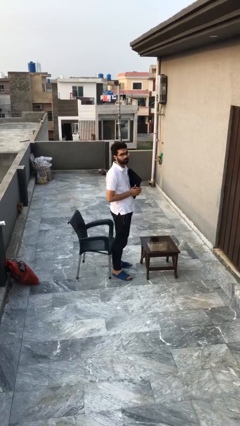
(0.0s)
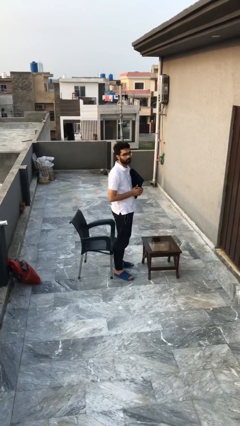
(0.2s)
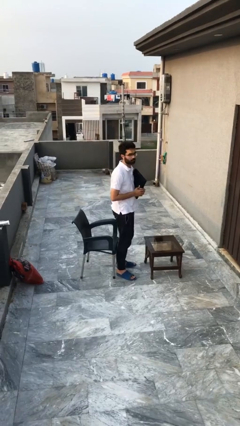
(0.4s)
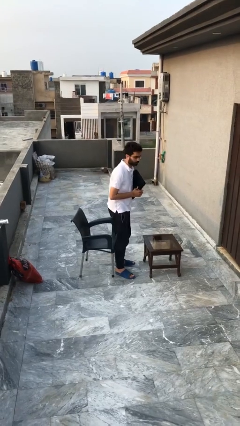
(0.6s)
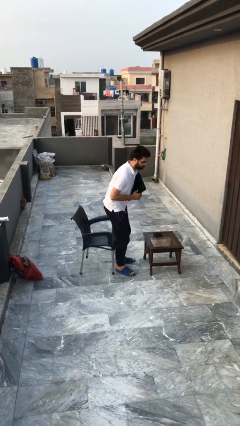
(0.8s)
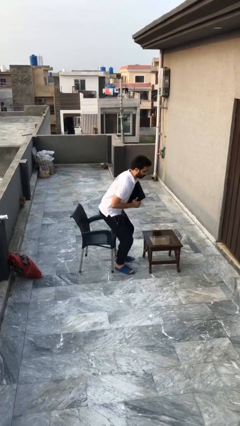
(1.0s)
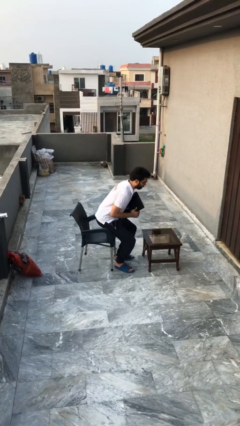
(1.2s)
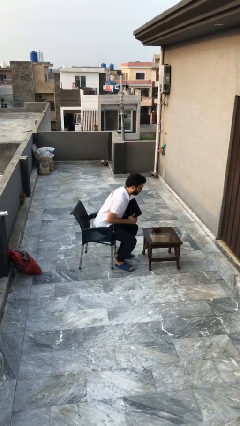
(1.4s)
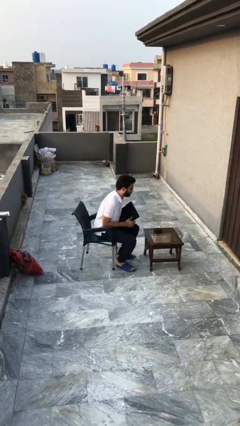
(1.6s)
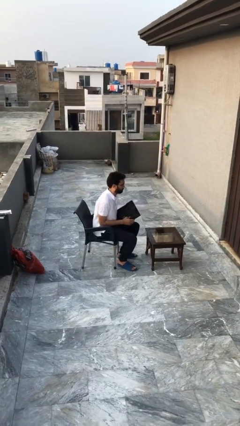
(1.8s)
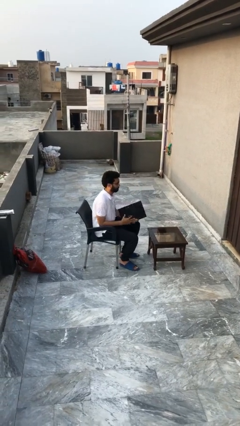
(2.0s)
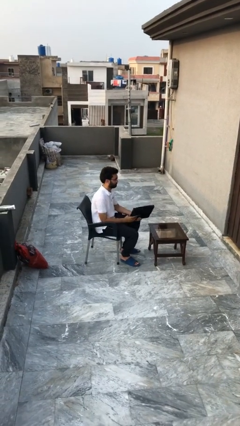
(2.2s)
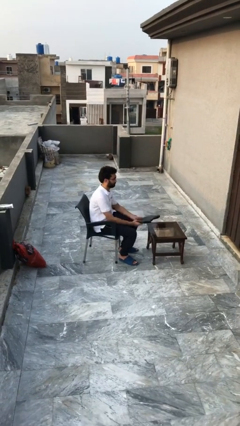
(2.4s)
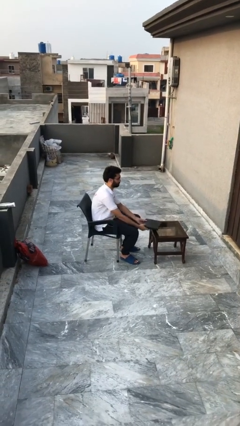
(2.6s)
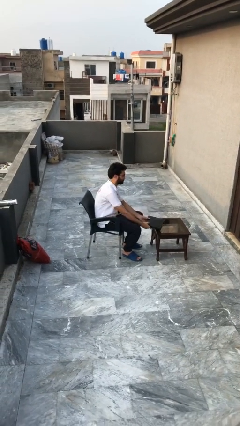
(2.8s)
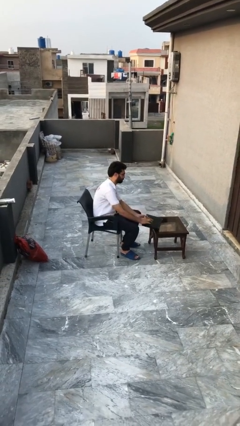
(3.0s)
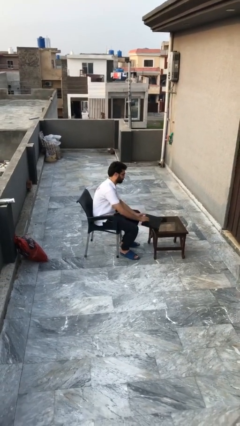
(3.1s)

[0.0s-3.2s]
person sits down

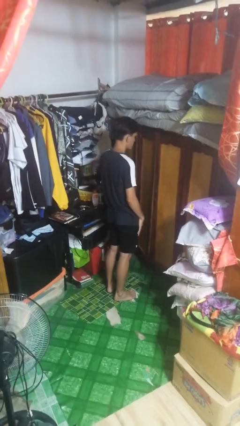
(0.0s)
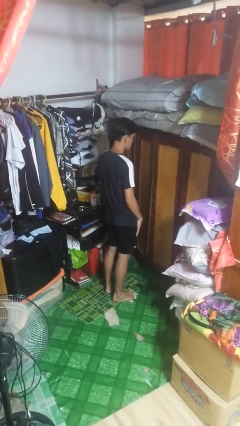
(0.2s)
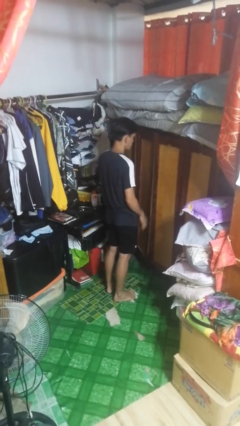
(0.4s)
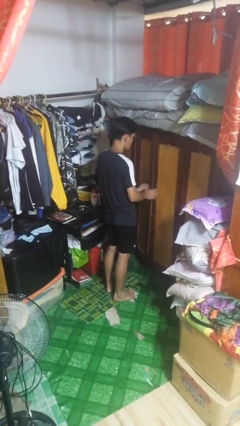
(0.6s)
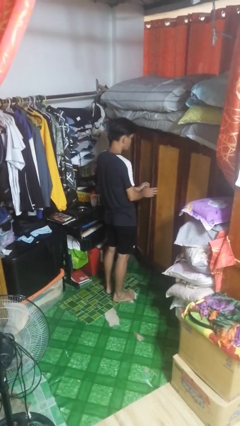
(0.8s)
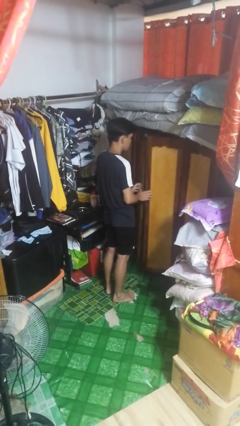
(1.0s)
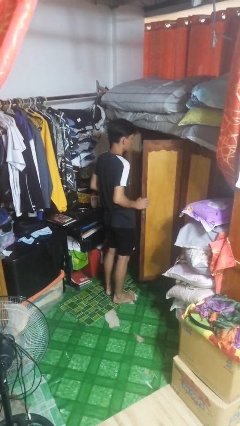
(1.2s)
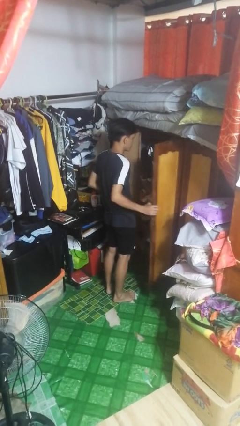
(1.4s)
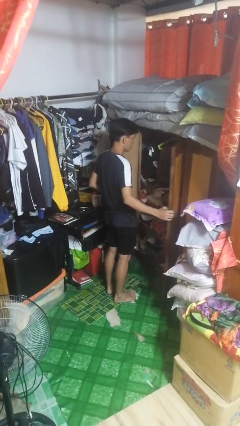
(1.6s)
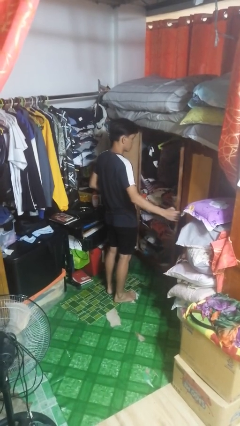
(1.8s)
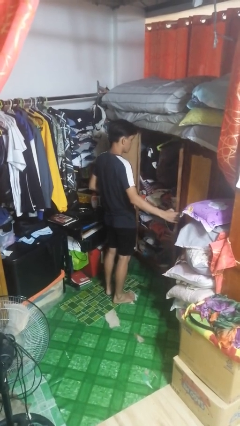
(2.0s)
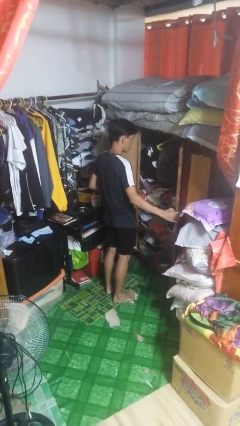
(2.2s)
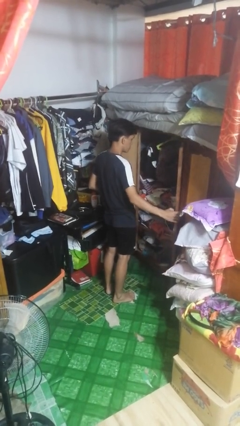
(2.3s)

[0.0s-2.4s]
person opens dresser drawer

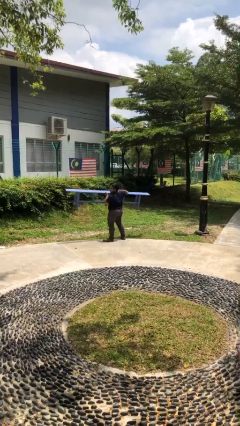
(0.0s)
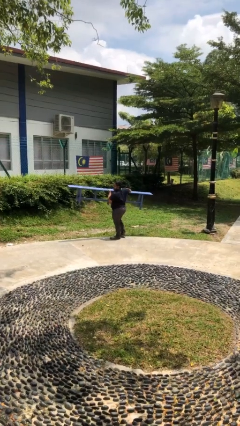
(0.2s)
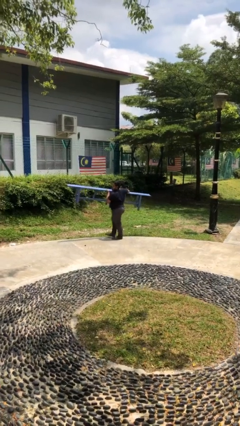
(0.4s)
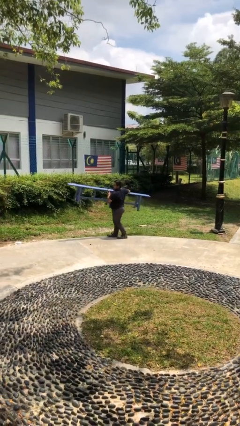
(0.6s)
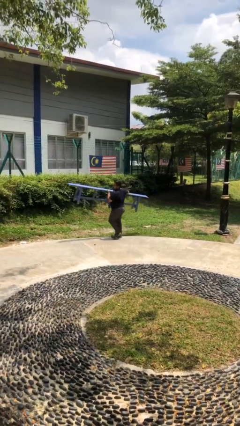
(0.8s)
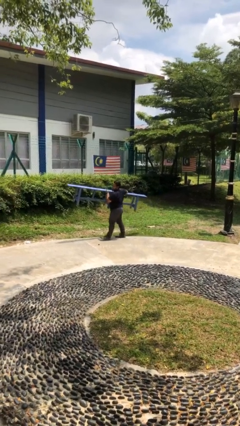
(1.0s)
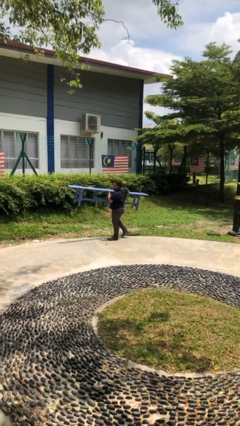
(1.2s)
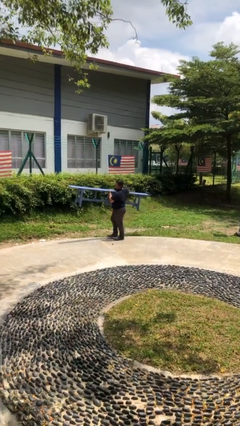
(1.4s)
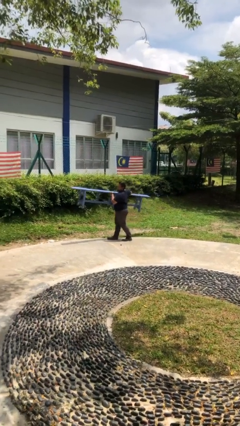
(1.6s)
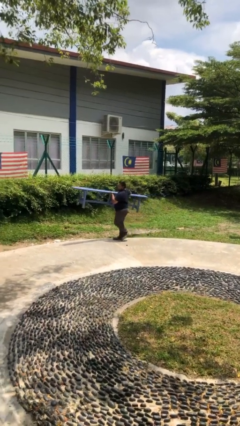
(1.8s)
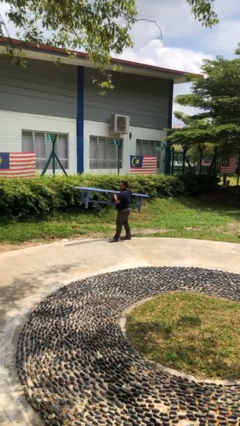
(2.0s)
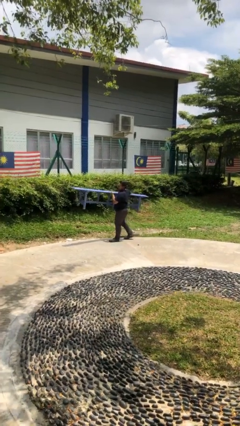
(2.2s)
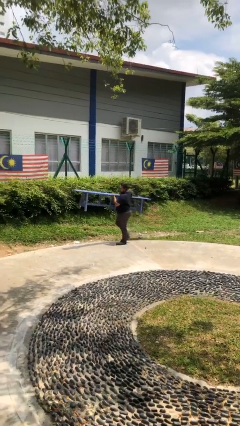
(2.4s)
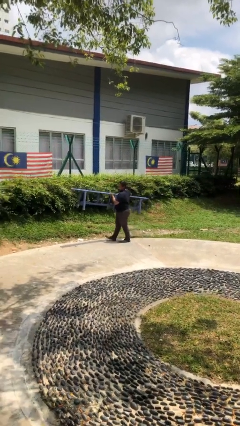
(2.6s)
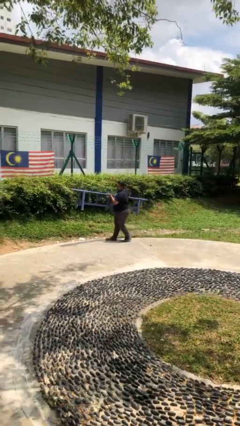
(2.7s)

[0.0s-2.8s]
person carries heavy object

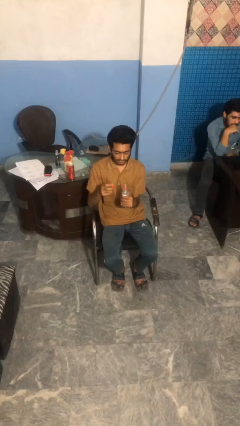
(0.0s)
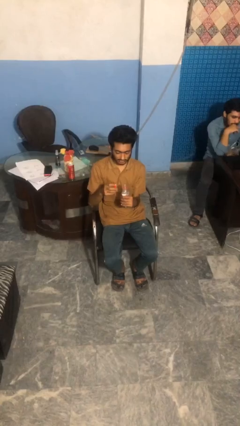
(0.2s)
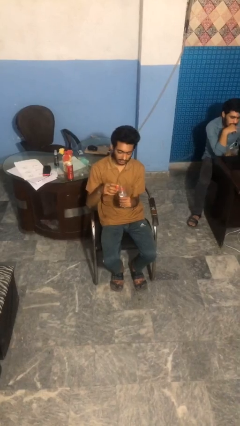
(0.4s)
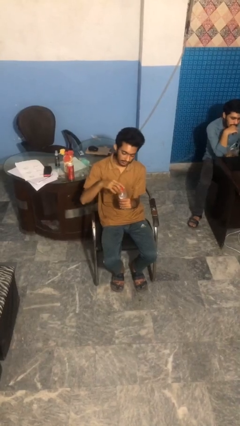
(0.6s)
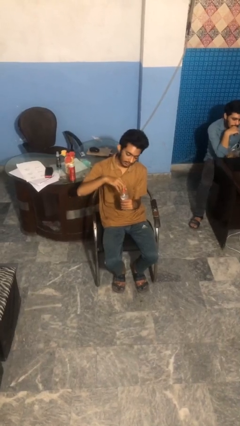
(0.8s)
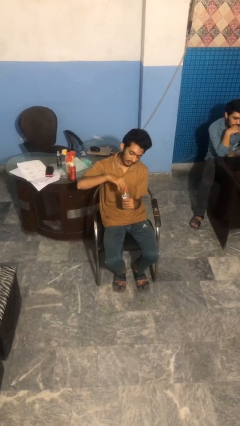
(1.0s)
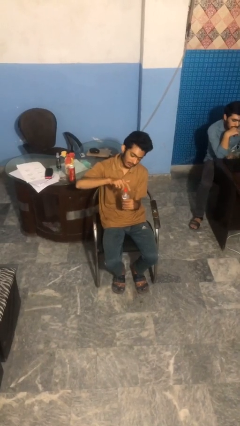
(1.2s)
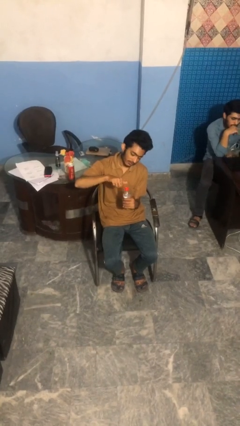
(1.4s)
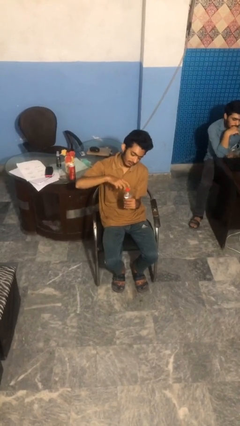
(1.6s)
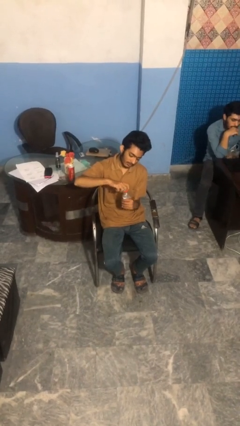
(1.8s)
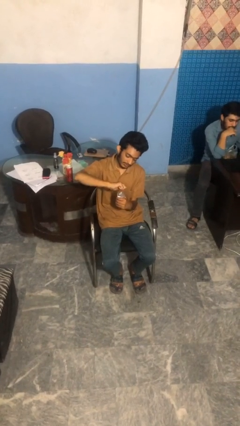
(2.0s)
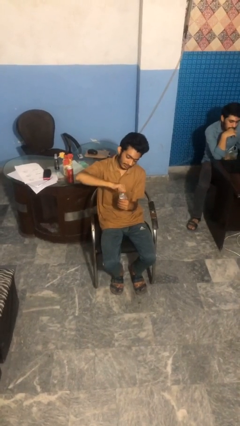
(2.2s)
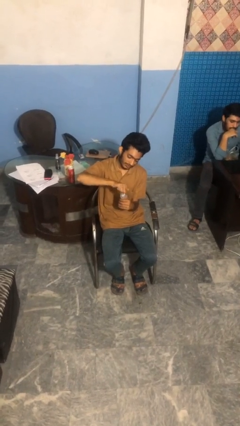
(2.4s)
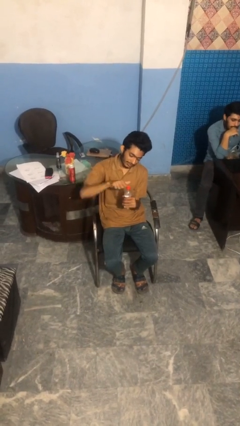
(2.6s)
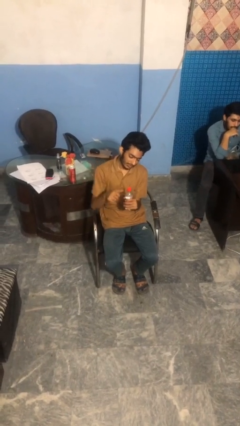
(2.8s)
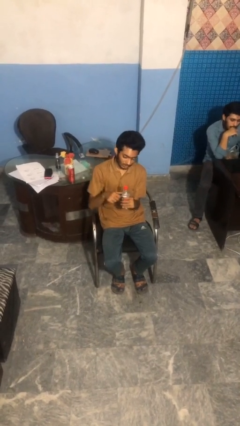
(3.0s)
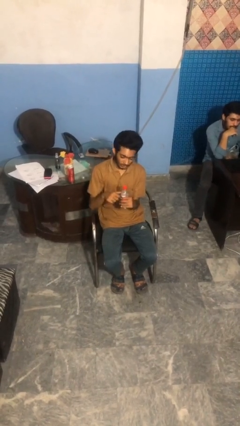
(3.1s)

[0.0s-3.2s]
person screws lid to bottle

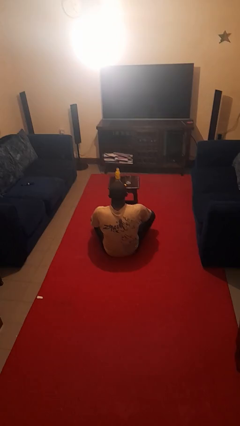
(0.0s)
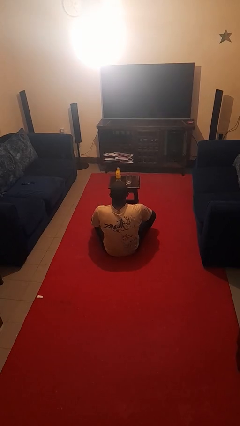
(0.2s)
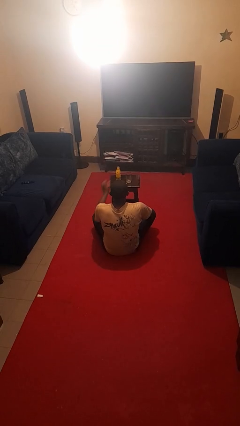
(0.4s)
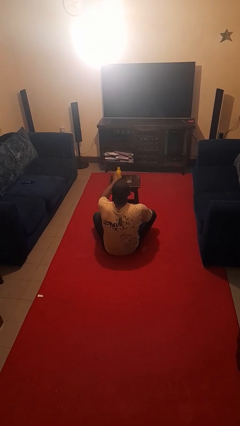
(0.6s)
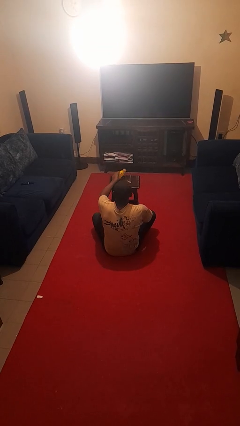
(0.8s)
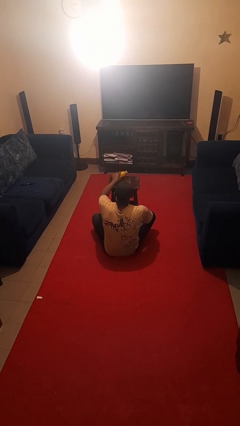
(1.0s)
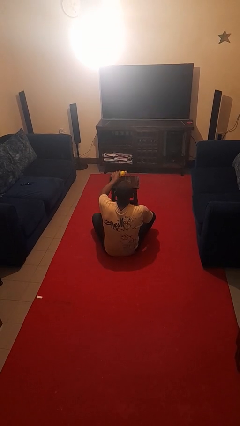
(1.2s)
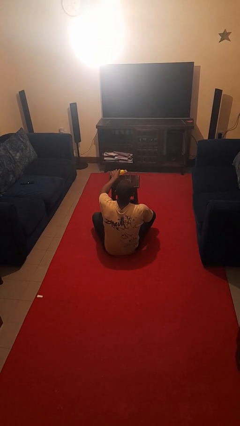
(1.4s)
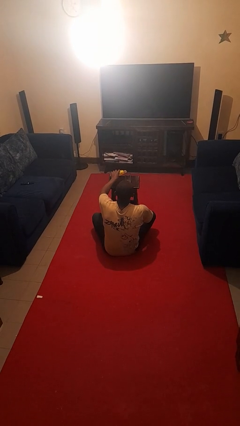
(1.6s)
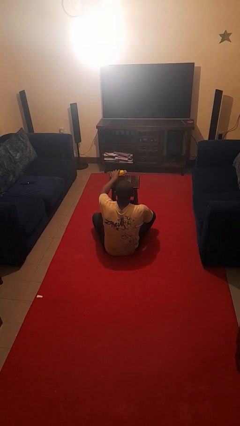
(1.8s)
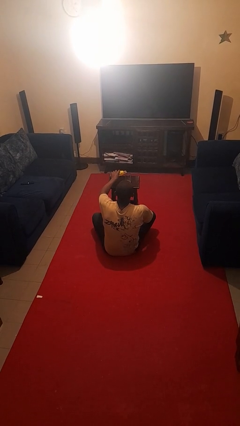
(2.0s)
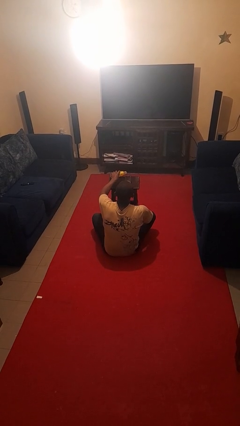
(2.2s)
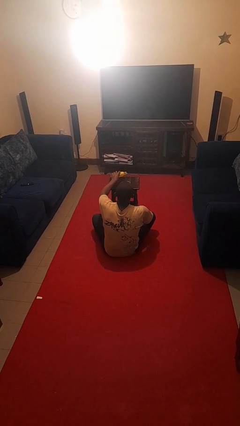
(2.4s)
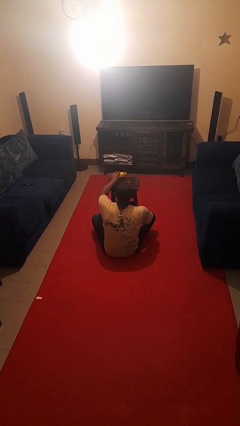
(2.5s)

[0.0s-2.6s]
person pours liquid into cup

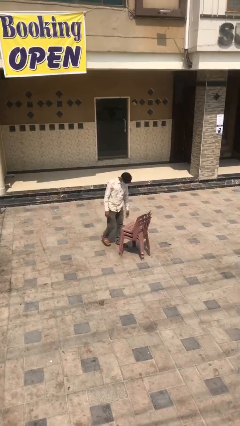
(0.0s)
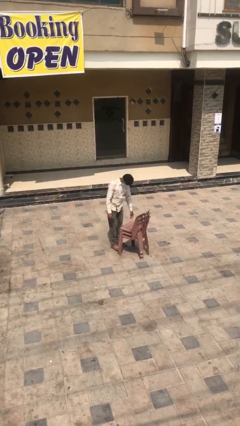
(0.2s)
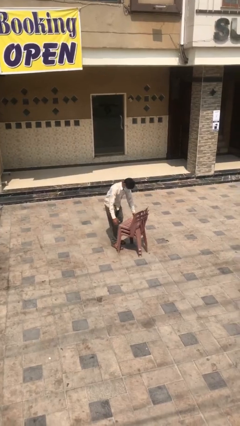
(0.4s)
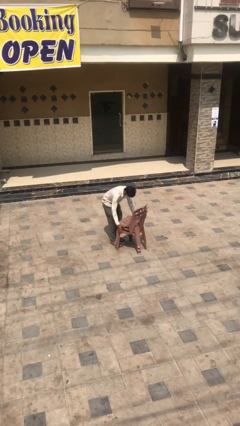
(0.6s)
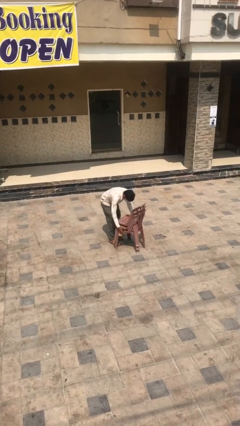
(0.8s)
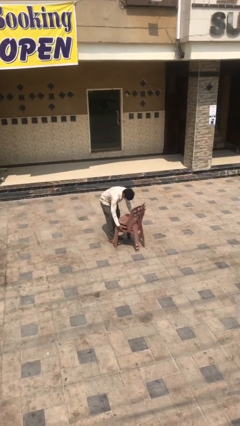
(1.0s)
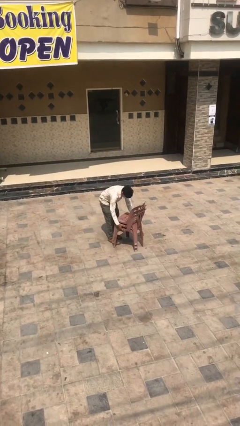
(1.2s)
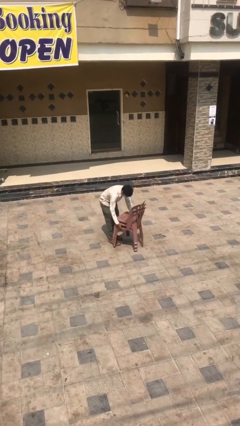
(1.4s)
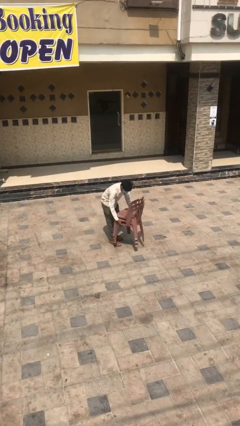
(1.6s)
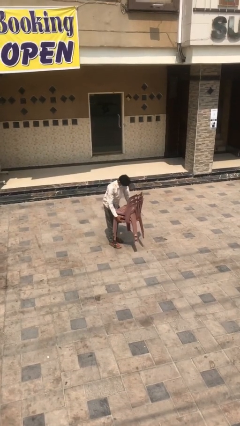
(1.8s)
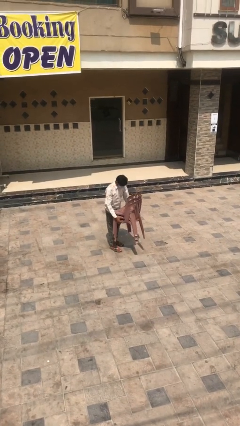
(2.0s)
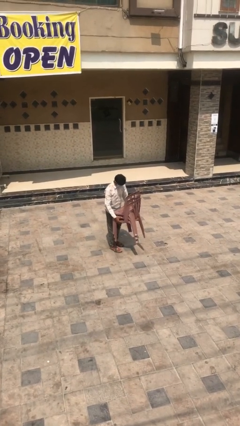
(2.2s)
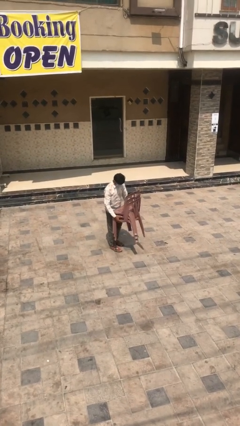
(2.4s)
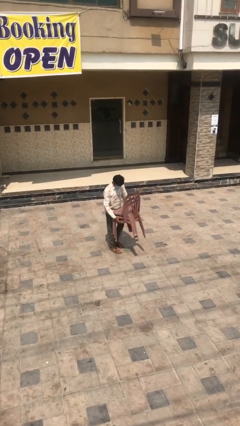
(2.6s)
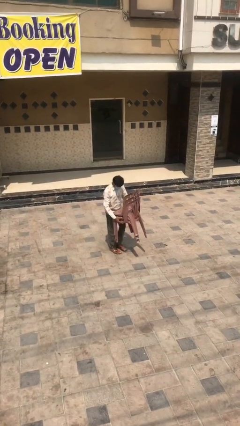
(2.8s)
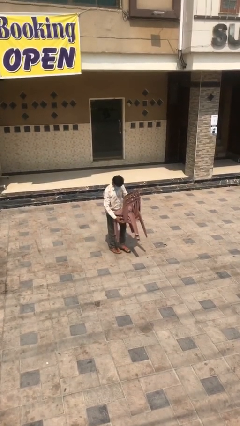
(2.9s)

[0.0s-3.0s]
person picks up object from floor

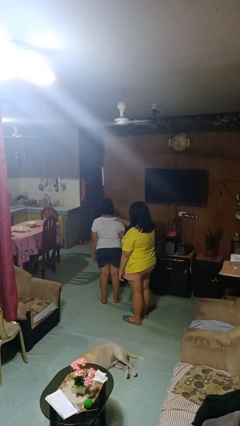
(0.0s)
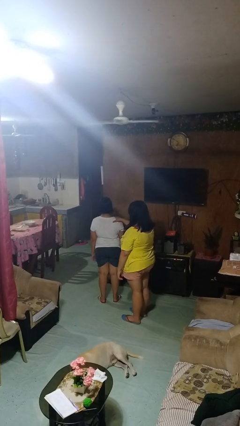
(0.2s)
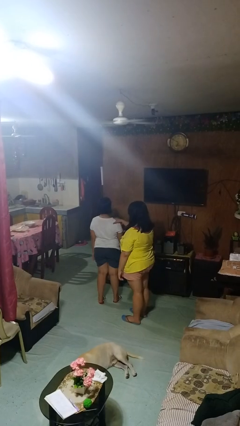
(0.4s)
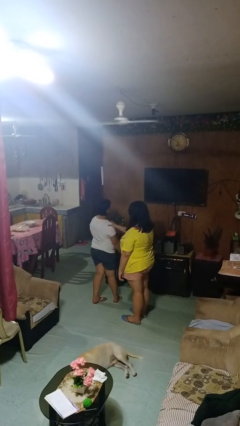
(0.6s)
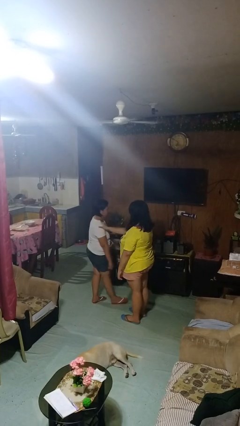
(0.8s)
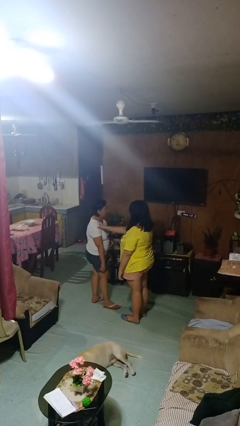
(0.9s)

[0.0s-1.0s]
person spins person around
